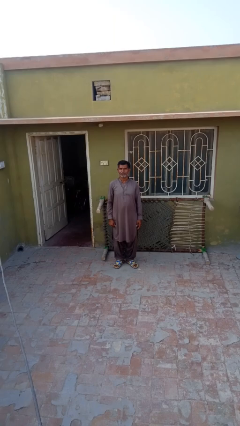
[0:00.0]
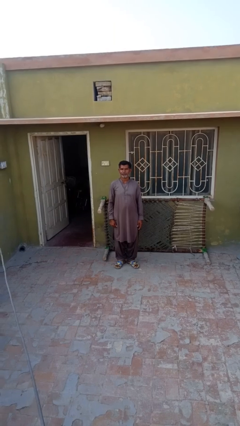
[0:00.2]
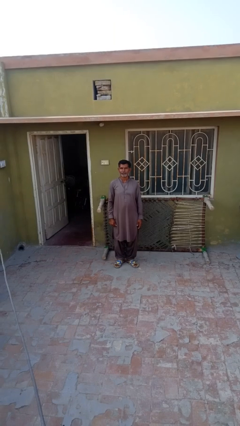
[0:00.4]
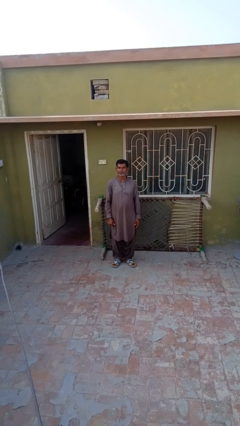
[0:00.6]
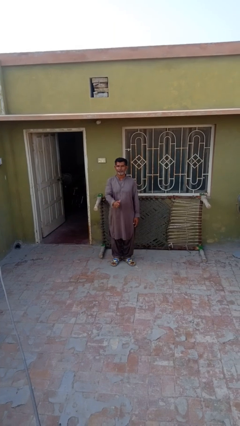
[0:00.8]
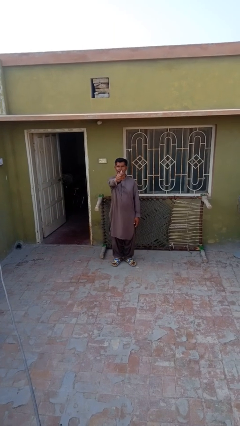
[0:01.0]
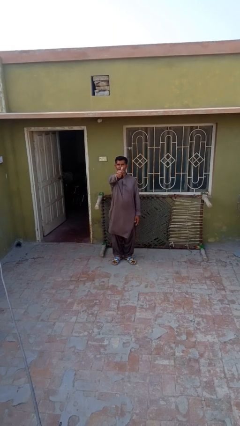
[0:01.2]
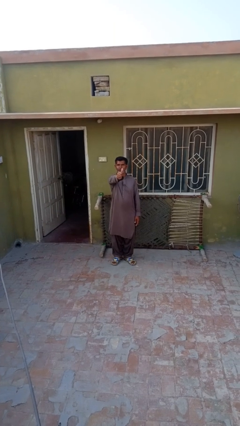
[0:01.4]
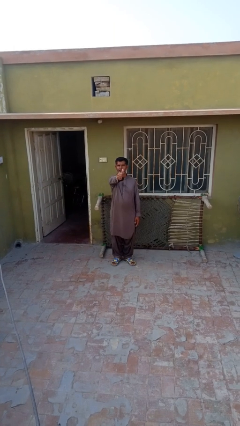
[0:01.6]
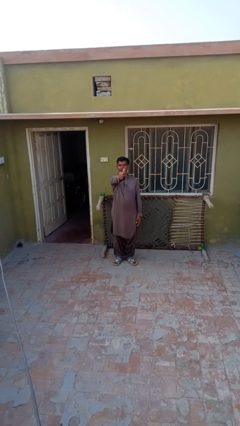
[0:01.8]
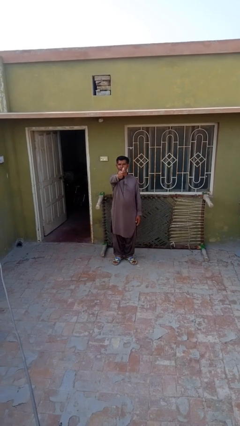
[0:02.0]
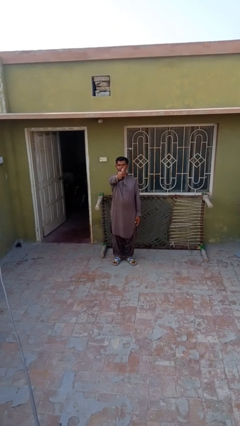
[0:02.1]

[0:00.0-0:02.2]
person gestures thumbs up

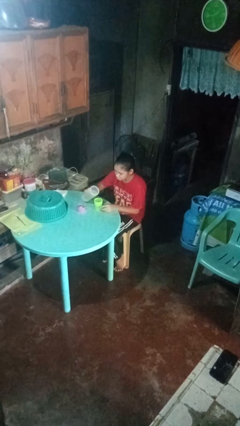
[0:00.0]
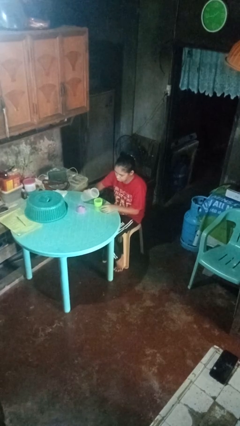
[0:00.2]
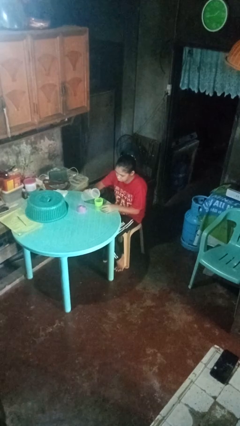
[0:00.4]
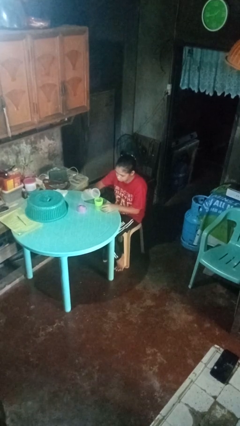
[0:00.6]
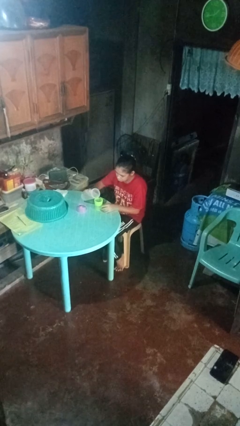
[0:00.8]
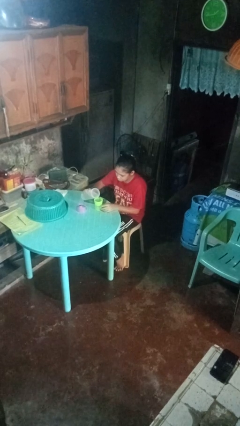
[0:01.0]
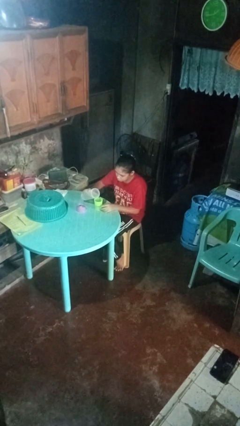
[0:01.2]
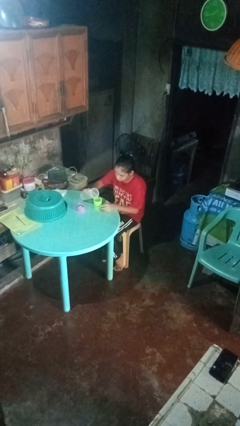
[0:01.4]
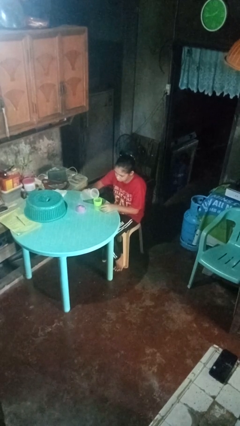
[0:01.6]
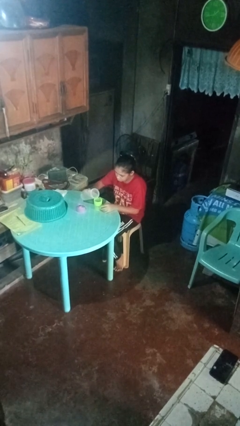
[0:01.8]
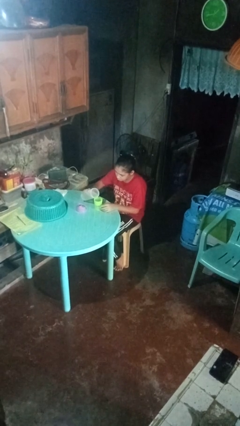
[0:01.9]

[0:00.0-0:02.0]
person pours liquid into cup

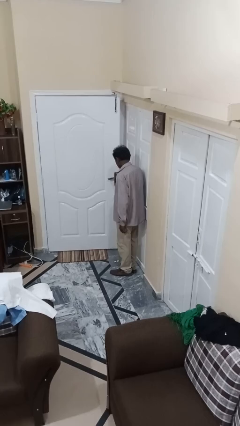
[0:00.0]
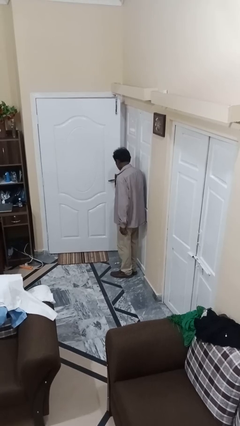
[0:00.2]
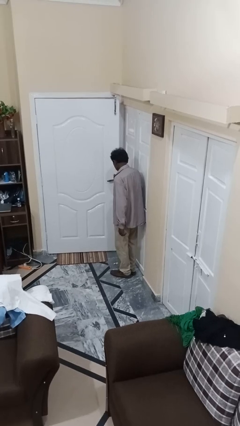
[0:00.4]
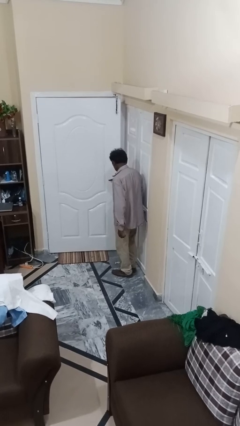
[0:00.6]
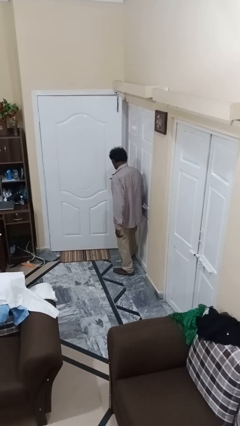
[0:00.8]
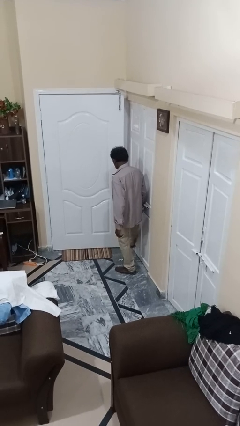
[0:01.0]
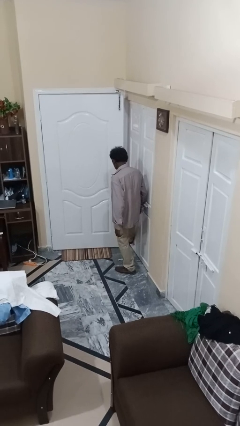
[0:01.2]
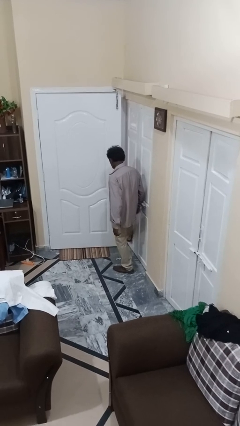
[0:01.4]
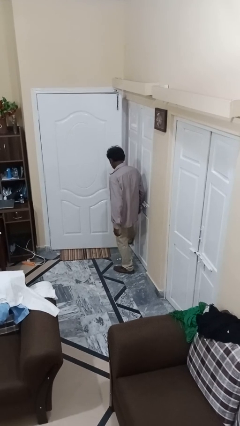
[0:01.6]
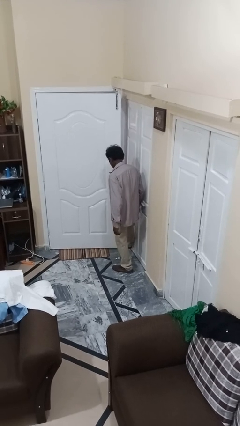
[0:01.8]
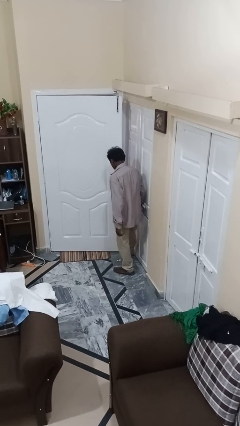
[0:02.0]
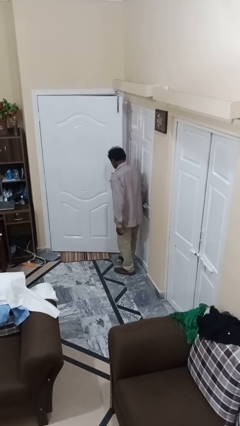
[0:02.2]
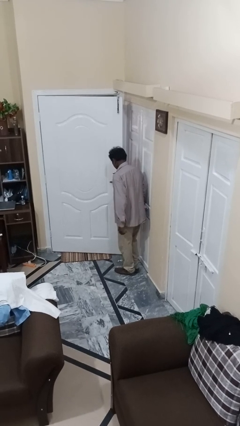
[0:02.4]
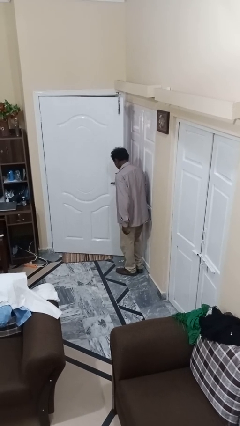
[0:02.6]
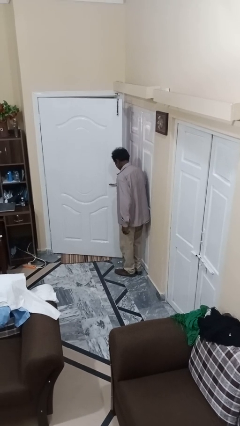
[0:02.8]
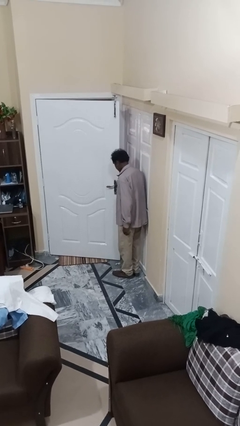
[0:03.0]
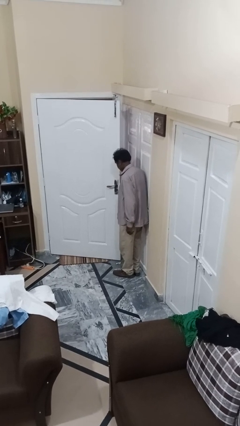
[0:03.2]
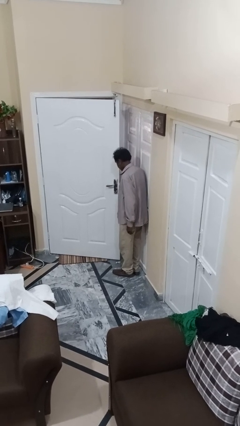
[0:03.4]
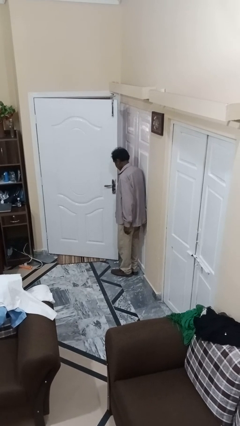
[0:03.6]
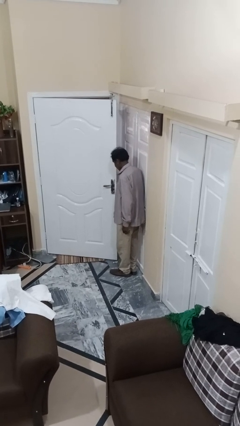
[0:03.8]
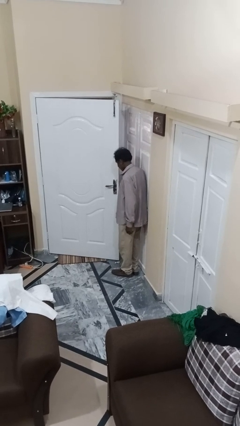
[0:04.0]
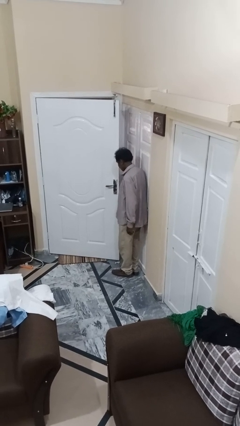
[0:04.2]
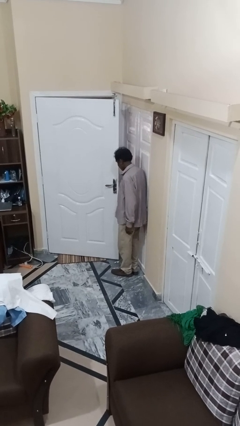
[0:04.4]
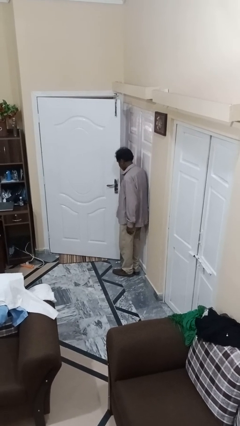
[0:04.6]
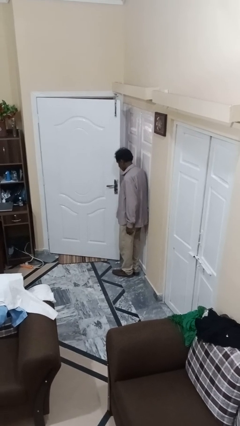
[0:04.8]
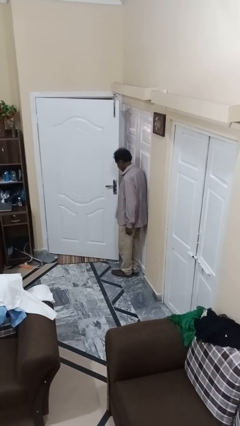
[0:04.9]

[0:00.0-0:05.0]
person opens facility door

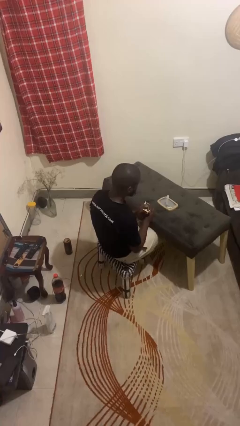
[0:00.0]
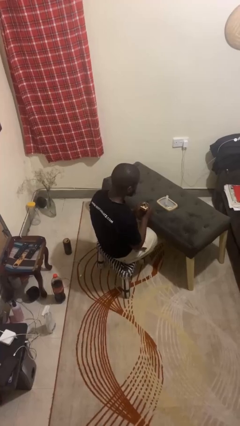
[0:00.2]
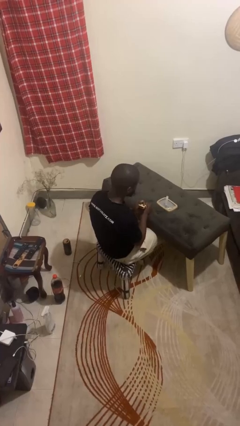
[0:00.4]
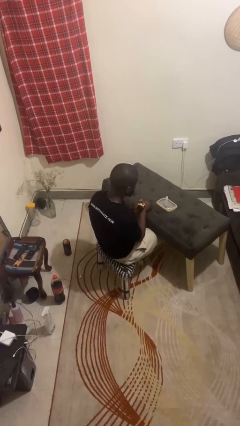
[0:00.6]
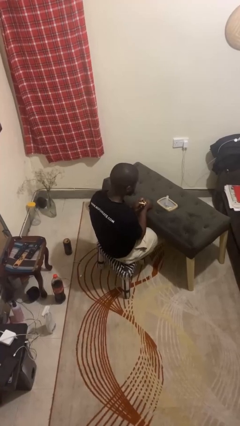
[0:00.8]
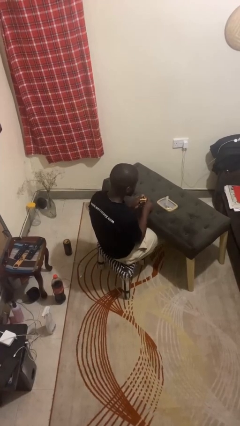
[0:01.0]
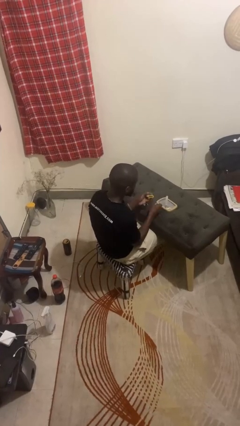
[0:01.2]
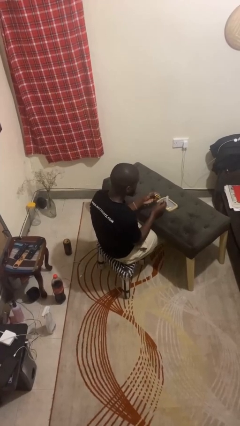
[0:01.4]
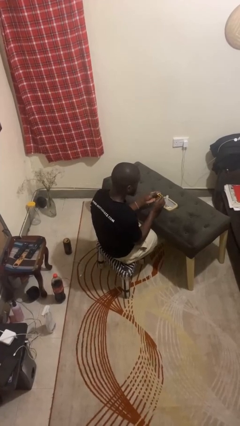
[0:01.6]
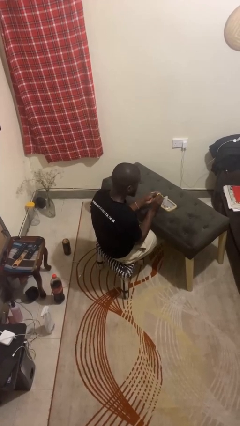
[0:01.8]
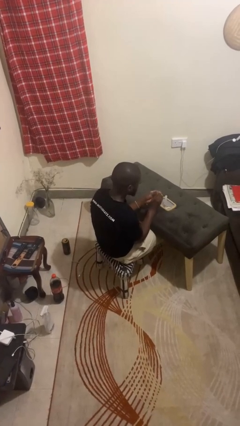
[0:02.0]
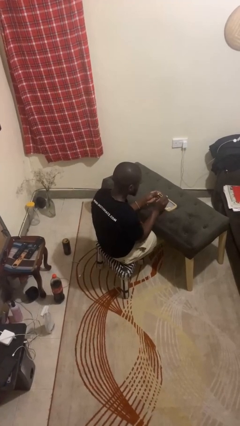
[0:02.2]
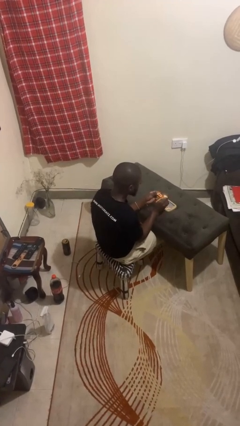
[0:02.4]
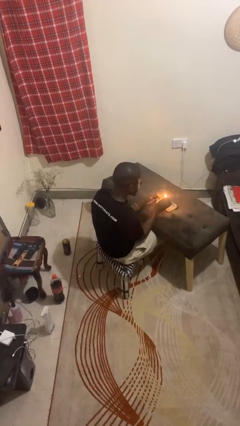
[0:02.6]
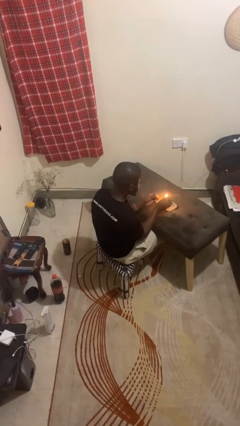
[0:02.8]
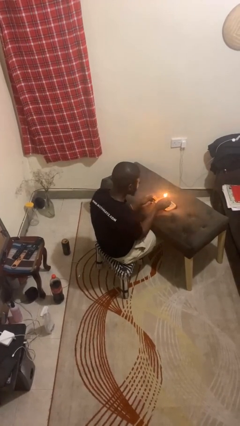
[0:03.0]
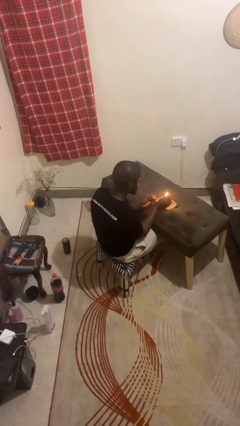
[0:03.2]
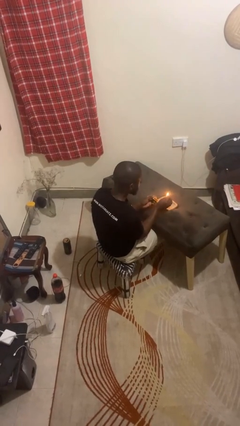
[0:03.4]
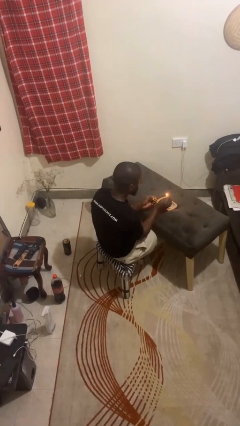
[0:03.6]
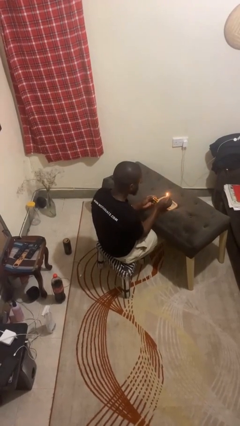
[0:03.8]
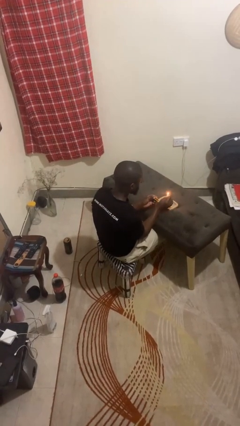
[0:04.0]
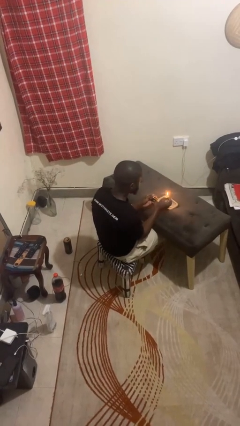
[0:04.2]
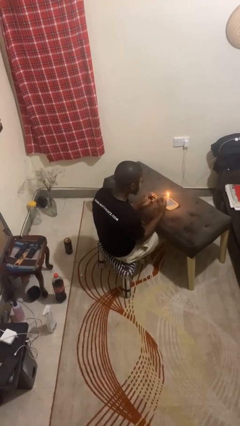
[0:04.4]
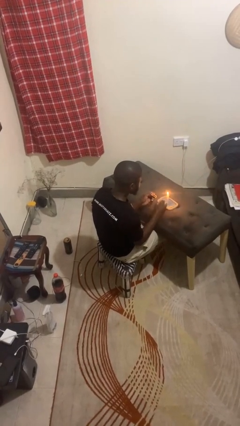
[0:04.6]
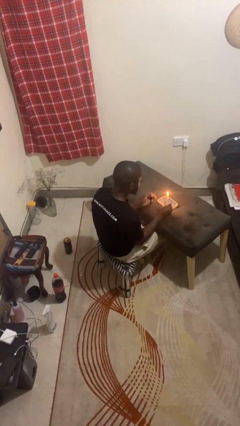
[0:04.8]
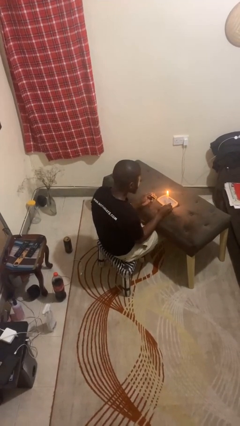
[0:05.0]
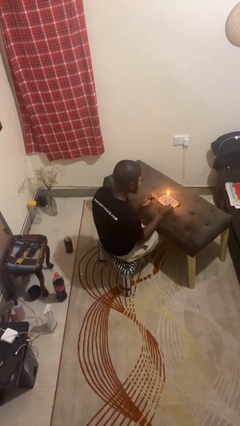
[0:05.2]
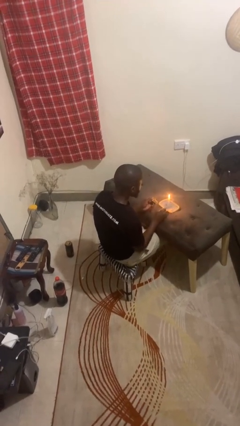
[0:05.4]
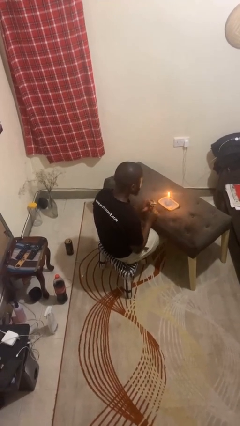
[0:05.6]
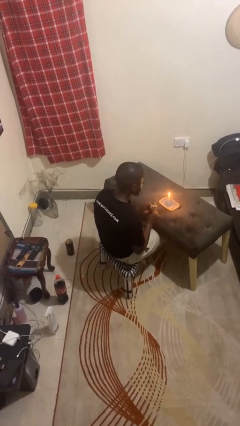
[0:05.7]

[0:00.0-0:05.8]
person lights candle

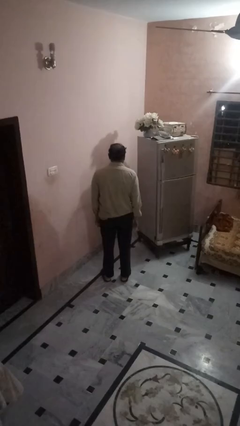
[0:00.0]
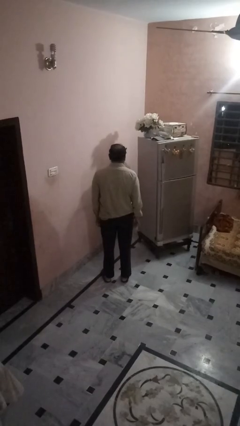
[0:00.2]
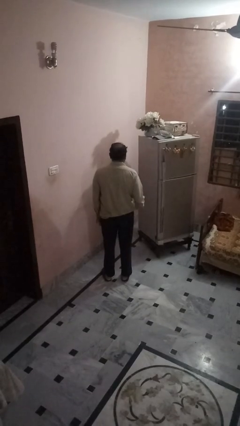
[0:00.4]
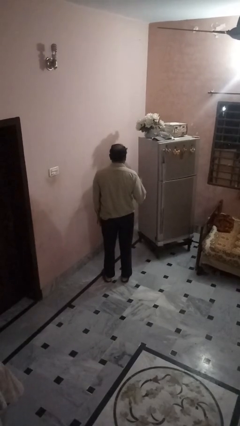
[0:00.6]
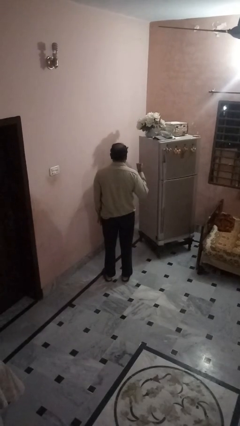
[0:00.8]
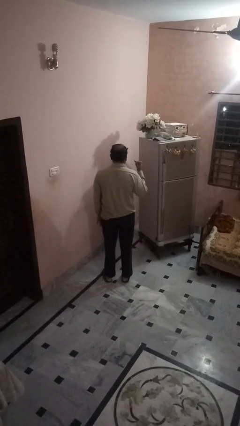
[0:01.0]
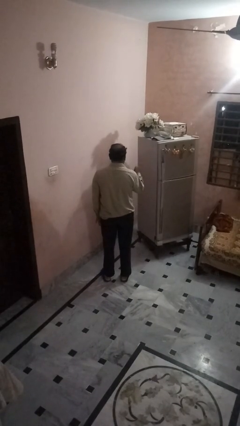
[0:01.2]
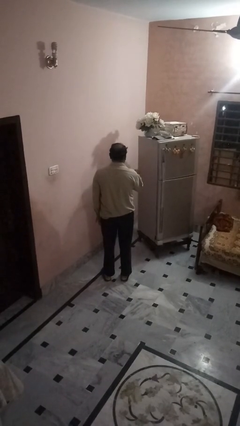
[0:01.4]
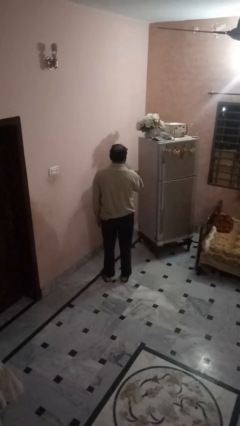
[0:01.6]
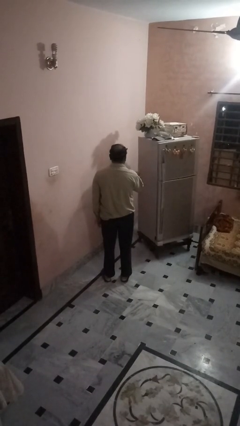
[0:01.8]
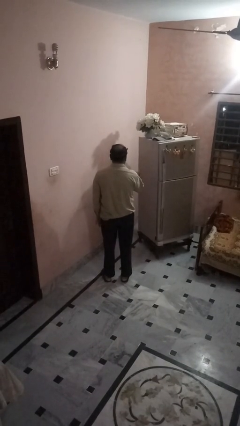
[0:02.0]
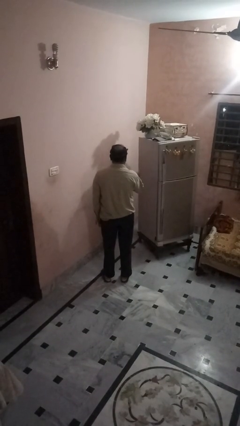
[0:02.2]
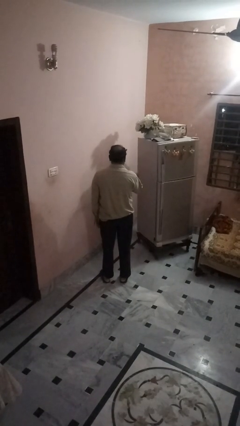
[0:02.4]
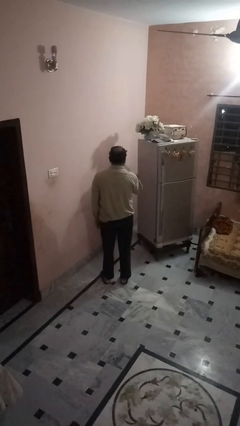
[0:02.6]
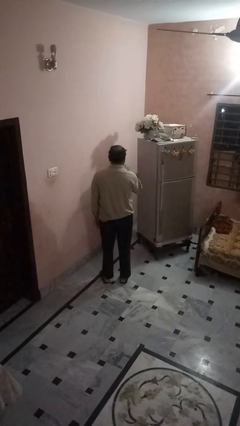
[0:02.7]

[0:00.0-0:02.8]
person gestures hang loose

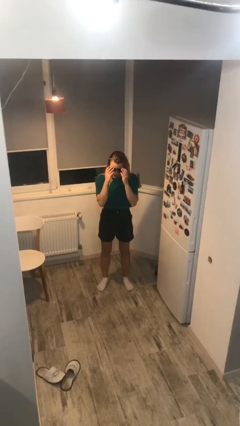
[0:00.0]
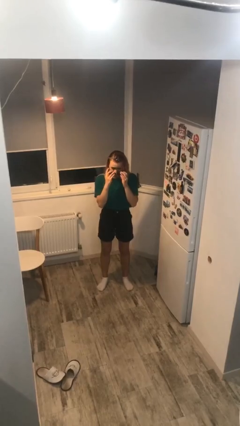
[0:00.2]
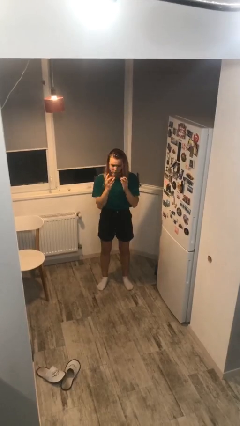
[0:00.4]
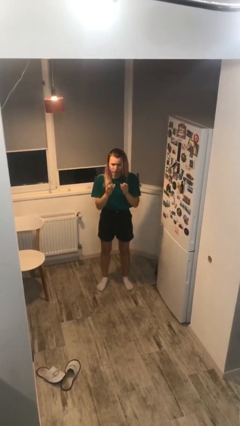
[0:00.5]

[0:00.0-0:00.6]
person takes off glasses
